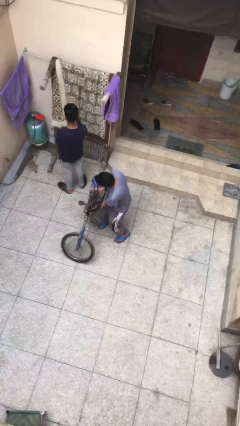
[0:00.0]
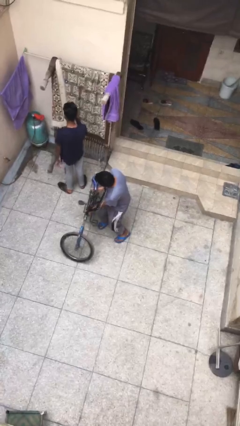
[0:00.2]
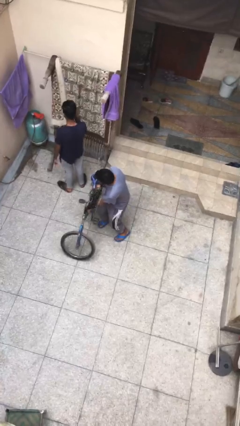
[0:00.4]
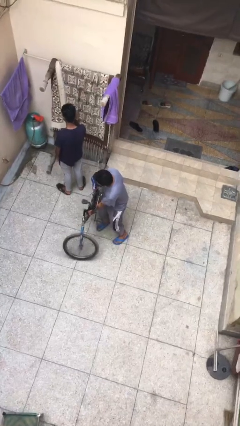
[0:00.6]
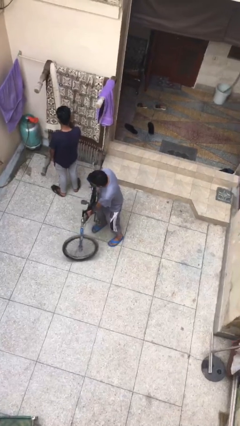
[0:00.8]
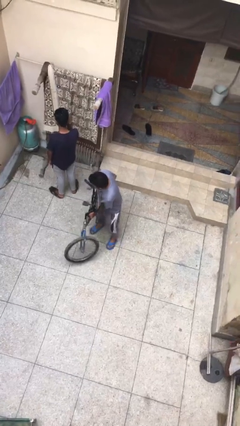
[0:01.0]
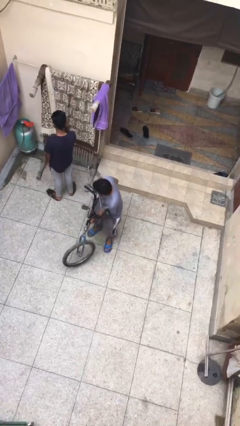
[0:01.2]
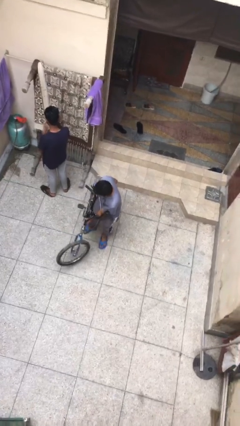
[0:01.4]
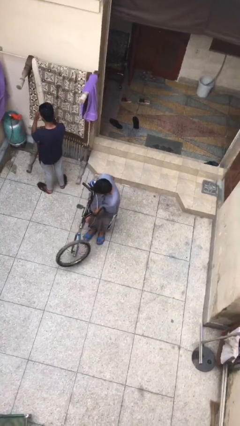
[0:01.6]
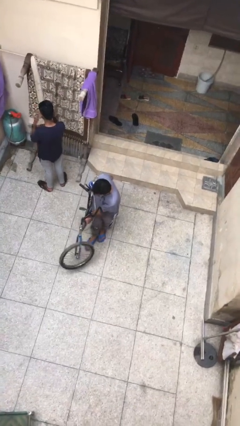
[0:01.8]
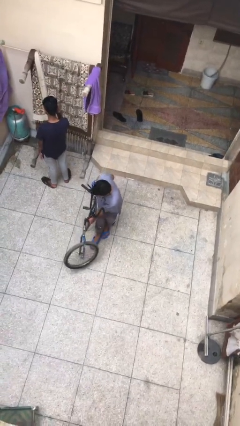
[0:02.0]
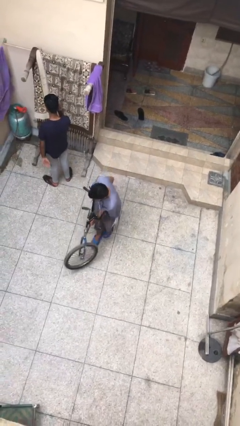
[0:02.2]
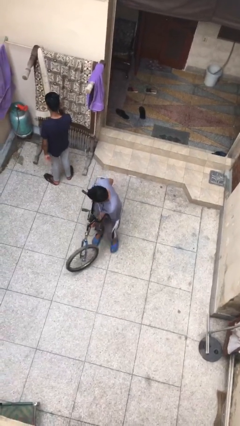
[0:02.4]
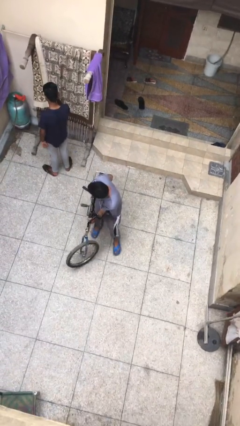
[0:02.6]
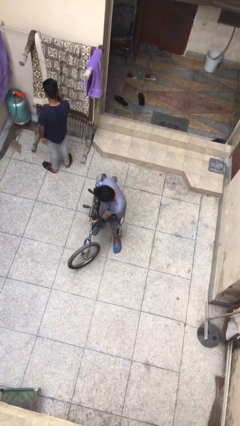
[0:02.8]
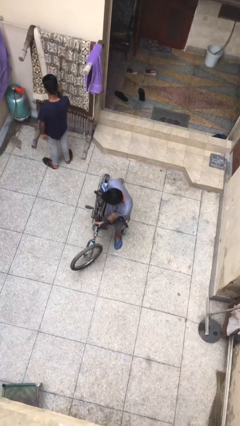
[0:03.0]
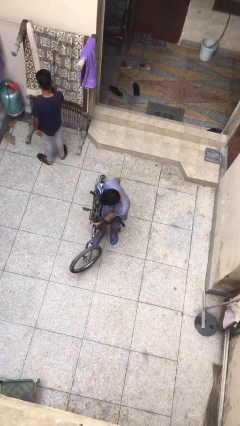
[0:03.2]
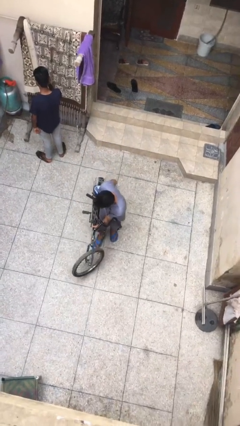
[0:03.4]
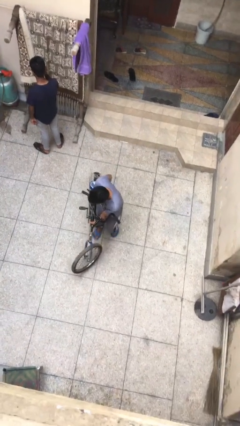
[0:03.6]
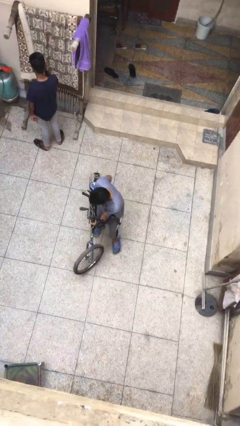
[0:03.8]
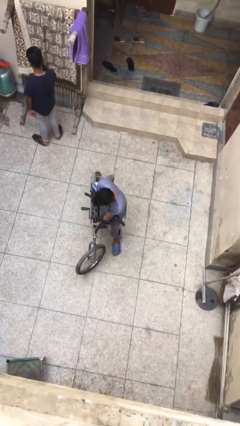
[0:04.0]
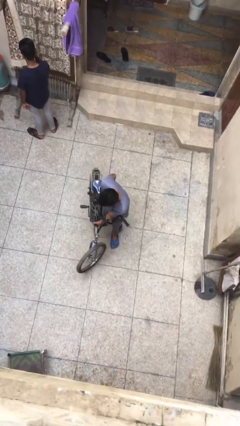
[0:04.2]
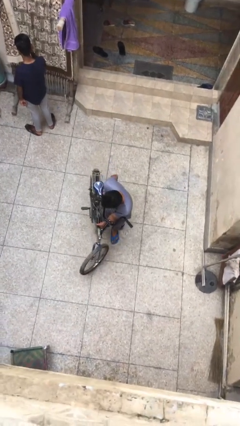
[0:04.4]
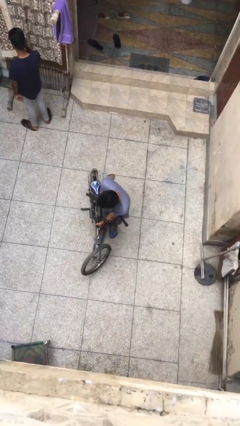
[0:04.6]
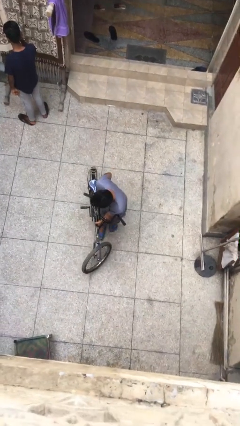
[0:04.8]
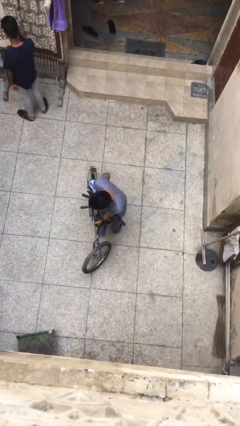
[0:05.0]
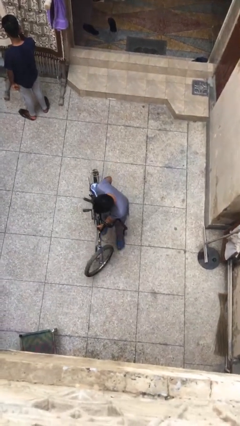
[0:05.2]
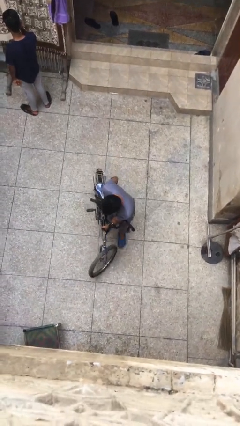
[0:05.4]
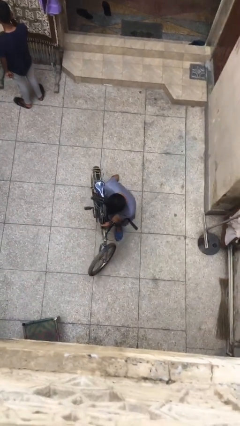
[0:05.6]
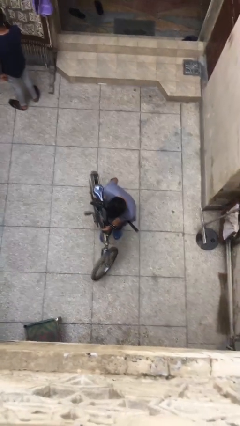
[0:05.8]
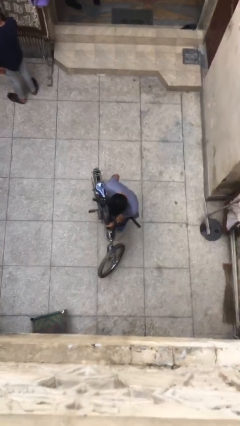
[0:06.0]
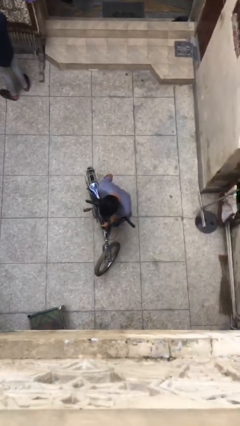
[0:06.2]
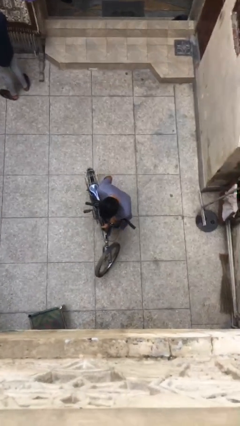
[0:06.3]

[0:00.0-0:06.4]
person steals object from person

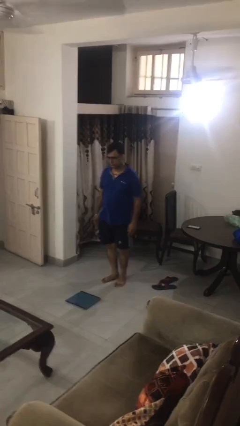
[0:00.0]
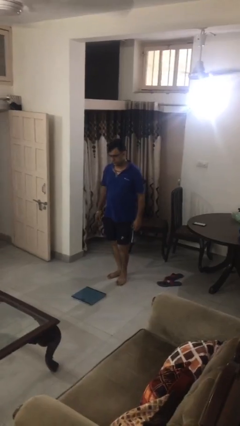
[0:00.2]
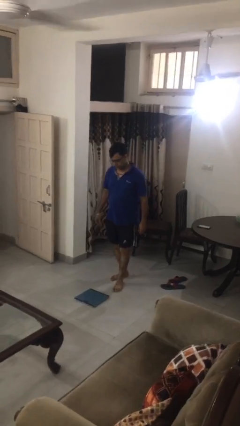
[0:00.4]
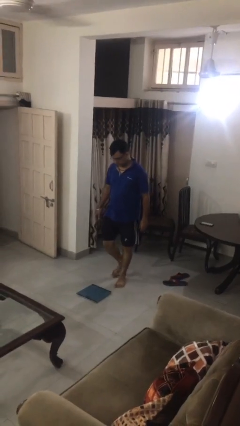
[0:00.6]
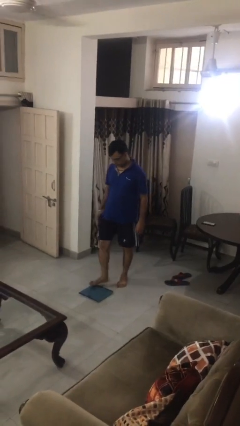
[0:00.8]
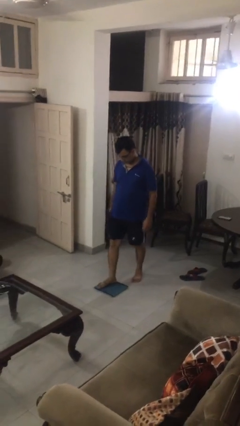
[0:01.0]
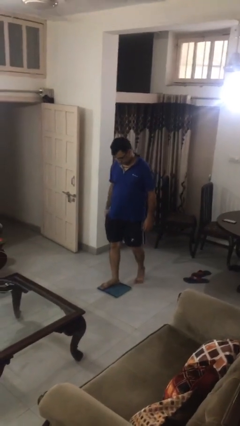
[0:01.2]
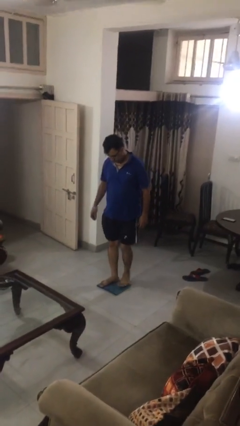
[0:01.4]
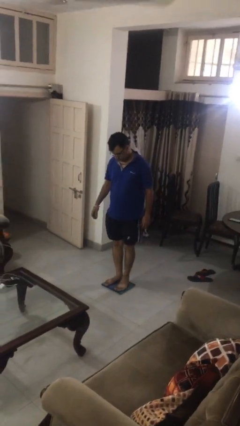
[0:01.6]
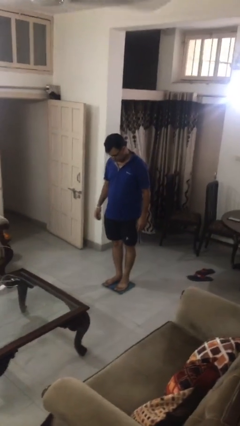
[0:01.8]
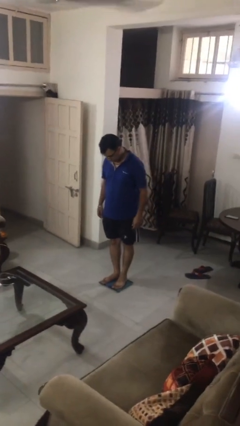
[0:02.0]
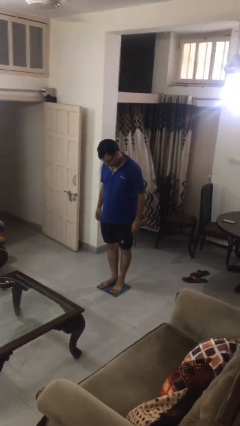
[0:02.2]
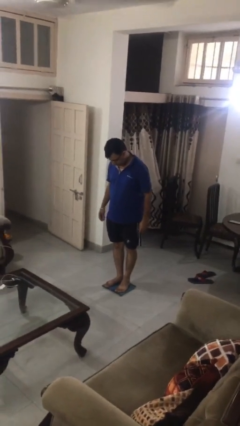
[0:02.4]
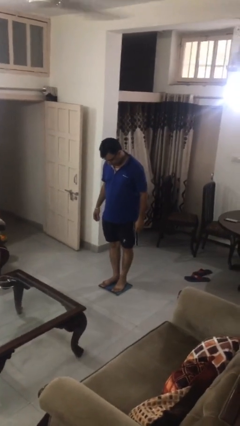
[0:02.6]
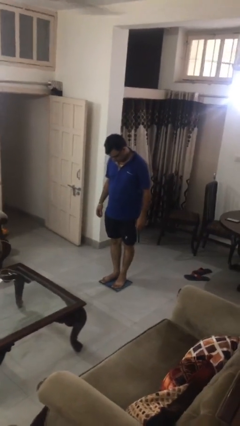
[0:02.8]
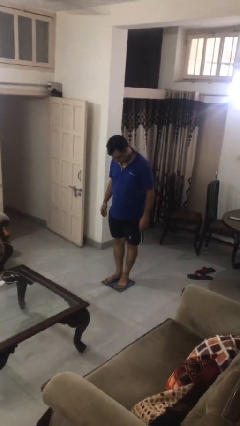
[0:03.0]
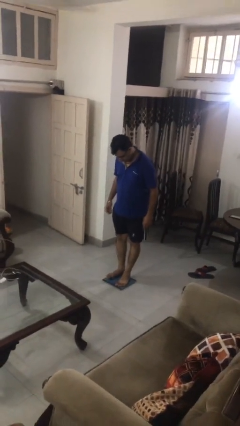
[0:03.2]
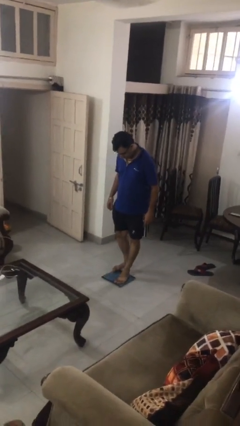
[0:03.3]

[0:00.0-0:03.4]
person uses bodyweight scale

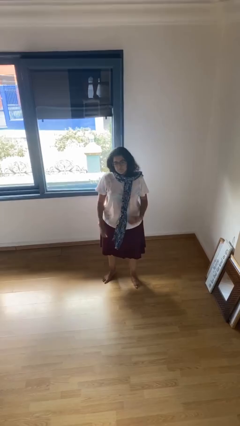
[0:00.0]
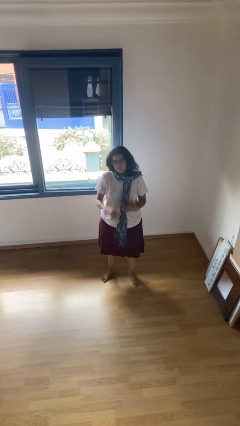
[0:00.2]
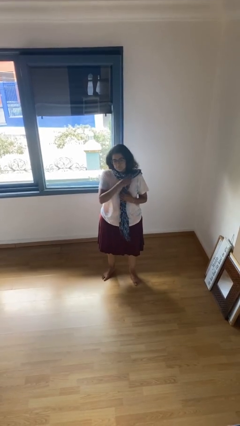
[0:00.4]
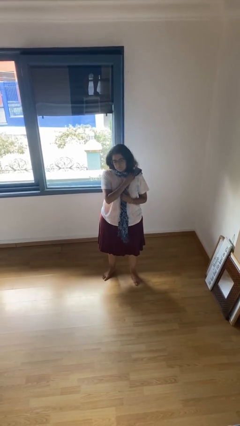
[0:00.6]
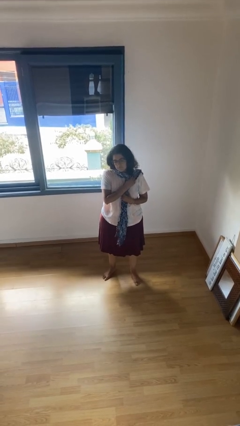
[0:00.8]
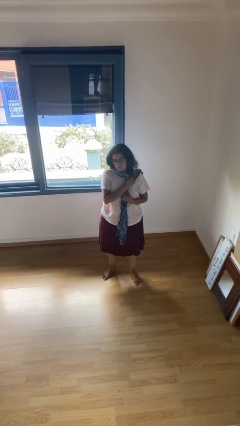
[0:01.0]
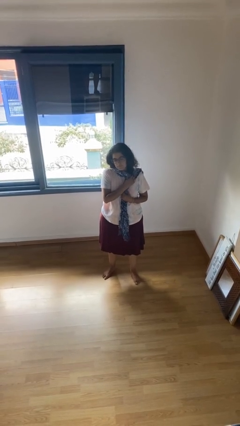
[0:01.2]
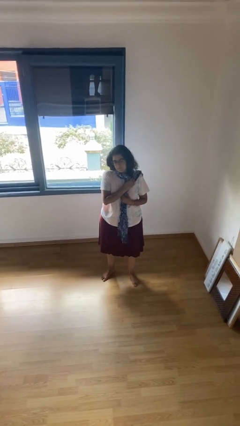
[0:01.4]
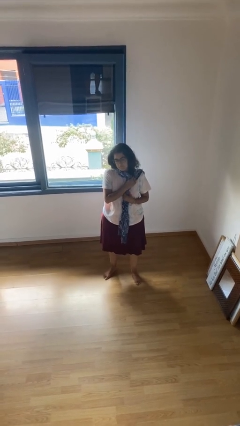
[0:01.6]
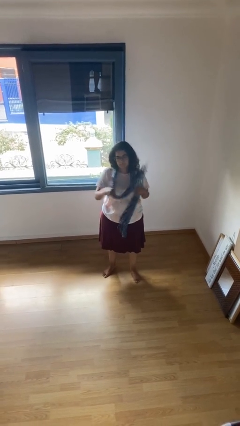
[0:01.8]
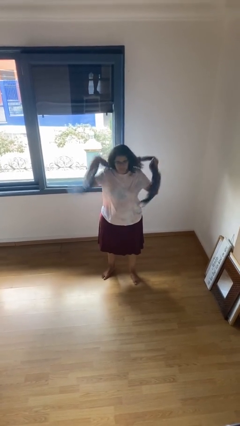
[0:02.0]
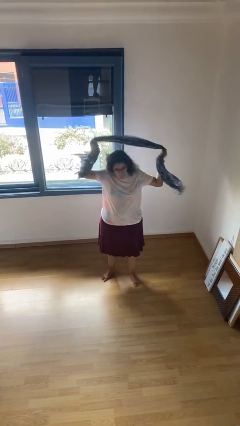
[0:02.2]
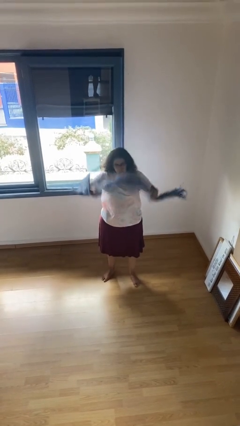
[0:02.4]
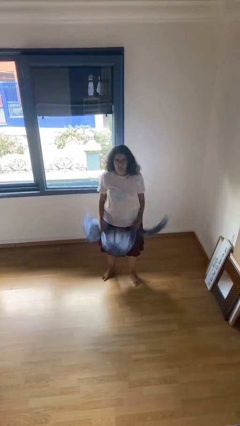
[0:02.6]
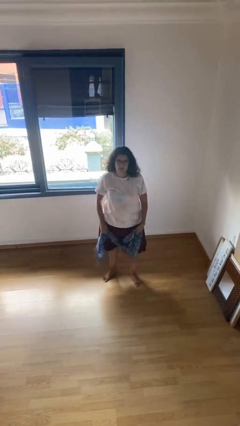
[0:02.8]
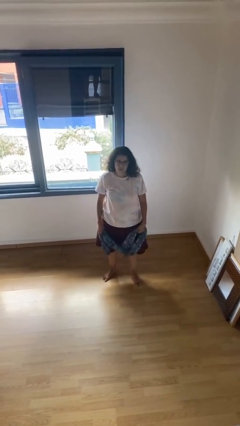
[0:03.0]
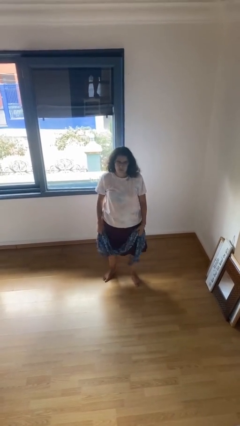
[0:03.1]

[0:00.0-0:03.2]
person takes off scarf

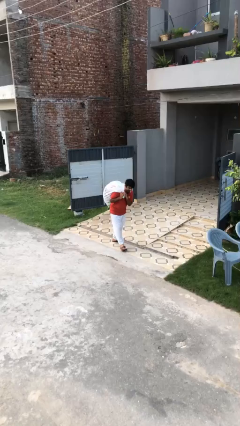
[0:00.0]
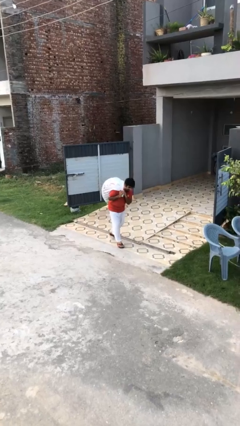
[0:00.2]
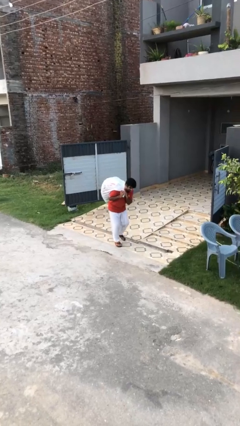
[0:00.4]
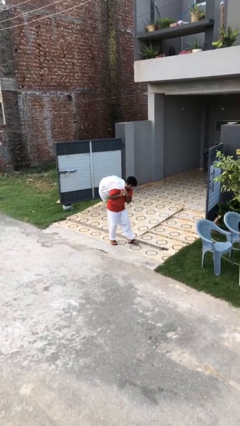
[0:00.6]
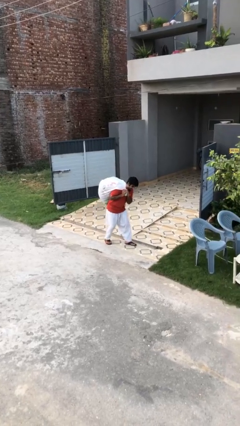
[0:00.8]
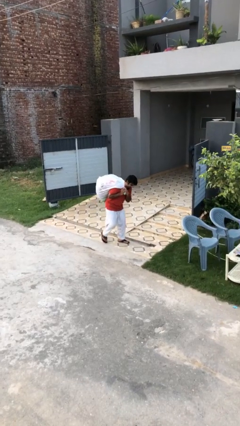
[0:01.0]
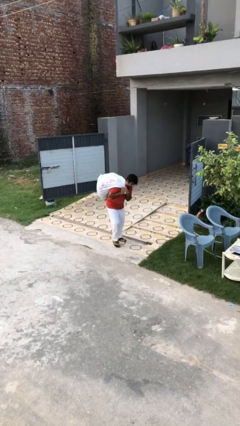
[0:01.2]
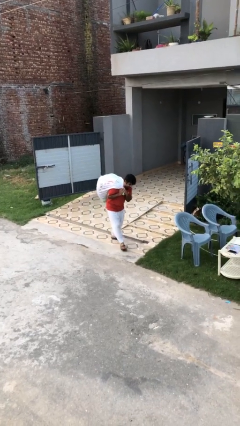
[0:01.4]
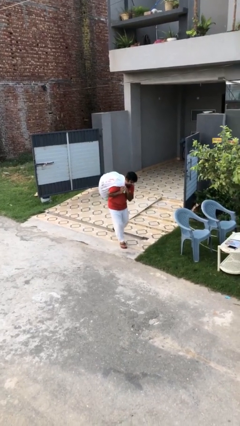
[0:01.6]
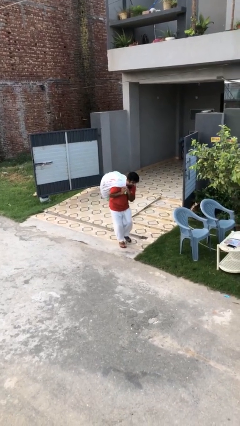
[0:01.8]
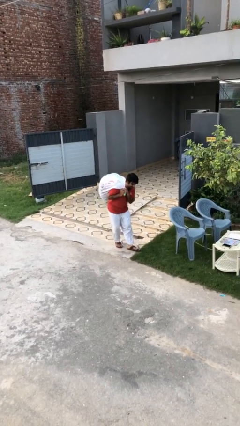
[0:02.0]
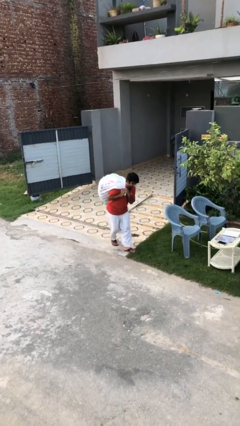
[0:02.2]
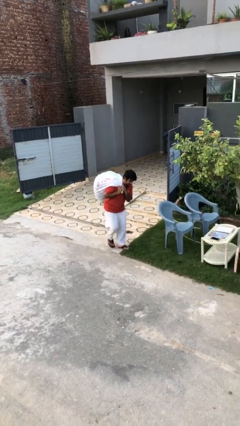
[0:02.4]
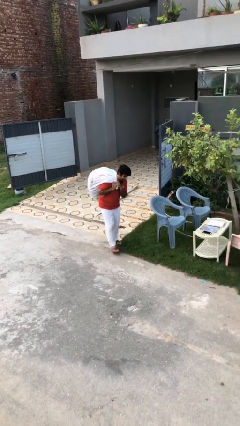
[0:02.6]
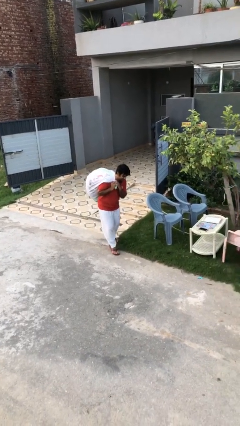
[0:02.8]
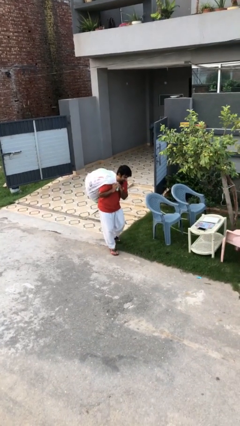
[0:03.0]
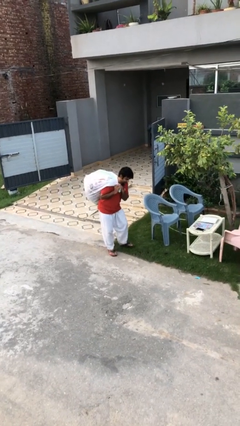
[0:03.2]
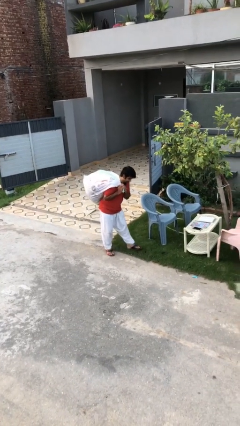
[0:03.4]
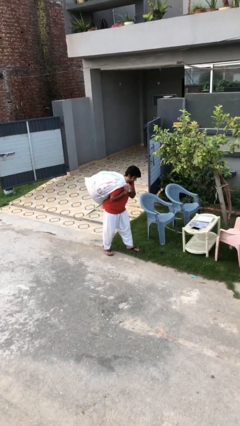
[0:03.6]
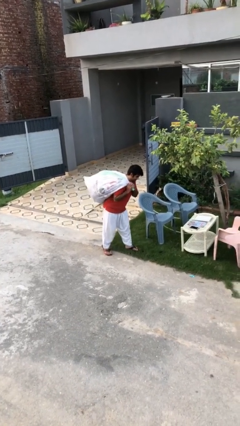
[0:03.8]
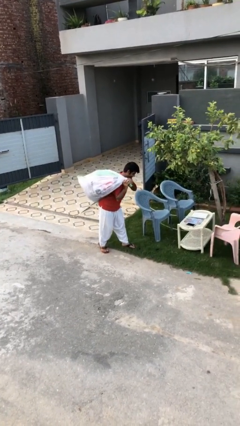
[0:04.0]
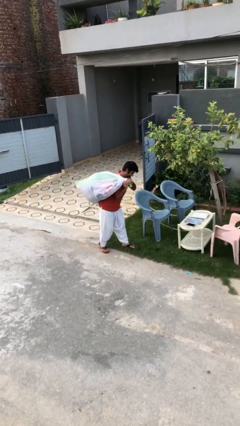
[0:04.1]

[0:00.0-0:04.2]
person carries heavy object

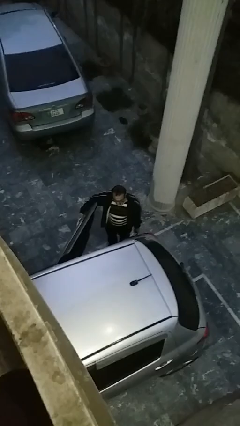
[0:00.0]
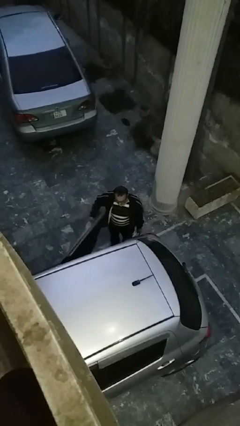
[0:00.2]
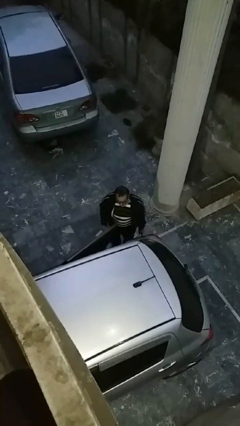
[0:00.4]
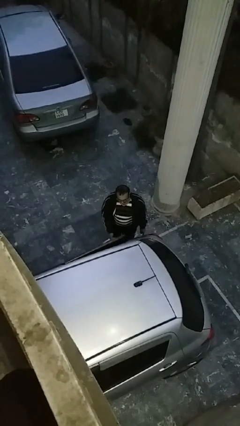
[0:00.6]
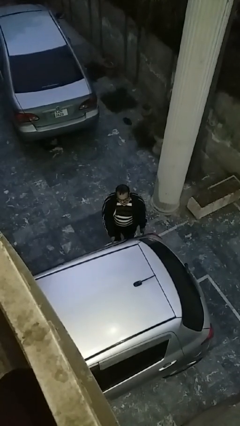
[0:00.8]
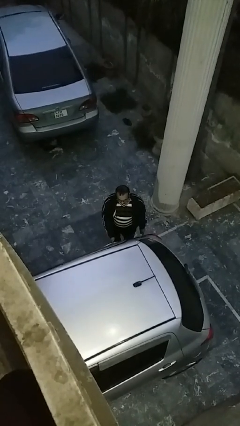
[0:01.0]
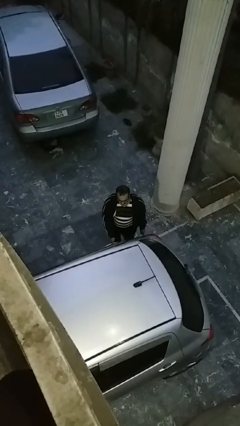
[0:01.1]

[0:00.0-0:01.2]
person closes car door
